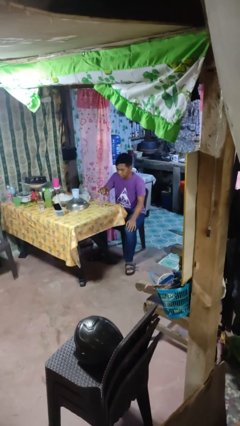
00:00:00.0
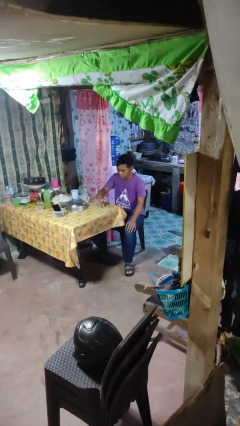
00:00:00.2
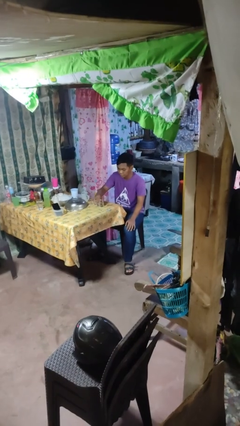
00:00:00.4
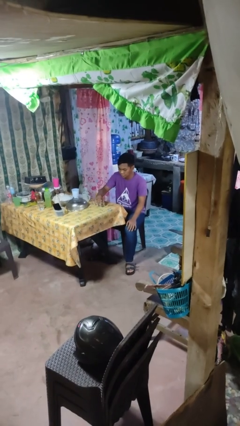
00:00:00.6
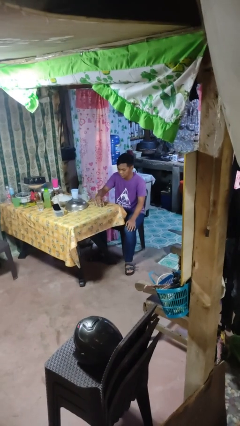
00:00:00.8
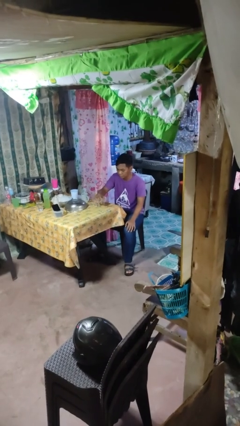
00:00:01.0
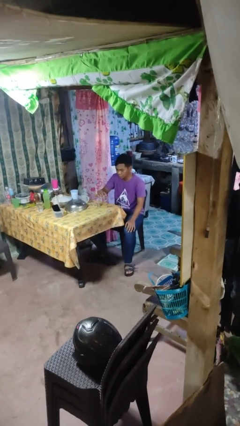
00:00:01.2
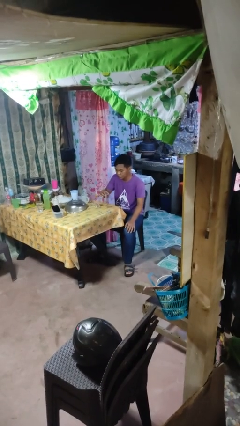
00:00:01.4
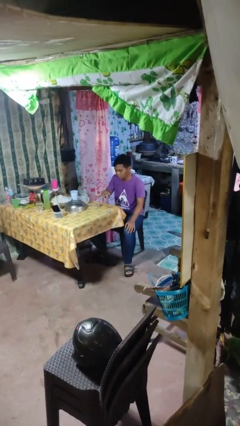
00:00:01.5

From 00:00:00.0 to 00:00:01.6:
person picks up object from table

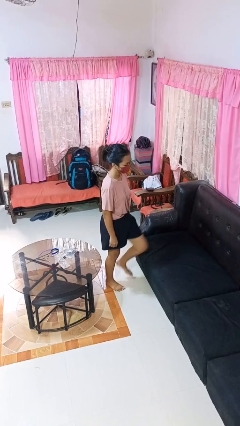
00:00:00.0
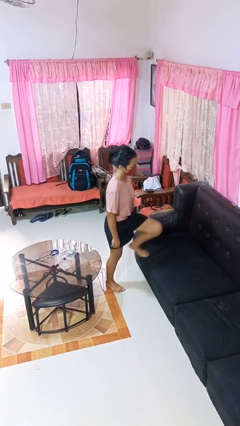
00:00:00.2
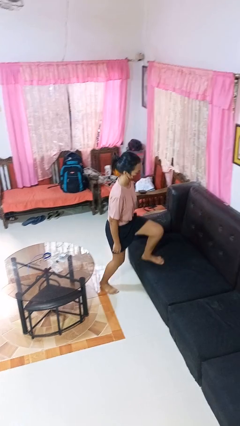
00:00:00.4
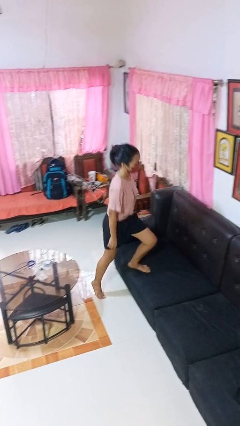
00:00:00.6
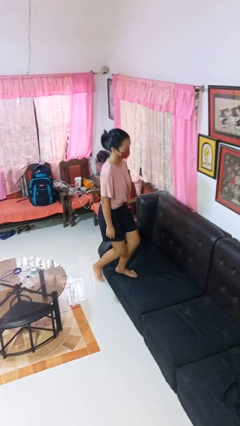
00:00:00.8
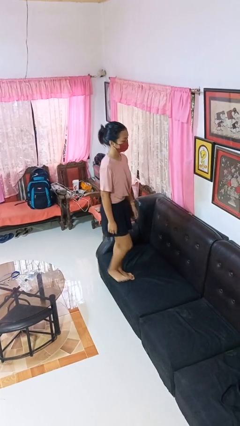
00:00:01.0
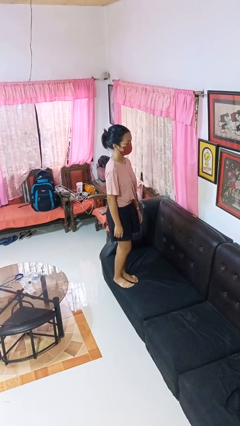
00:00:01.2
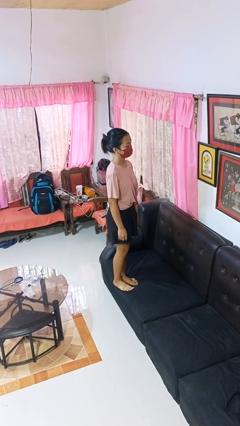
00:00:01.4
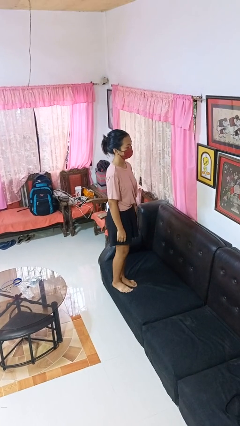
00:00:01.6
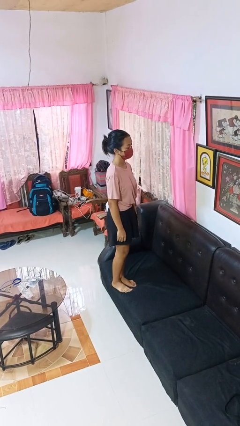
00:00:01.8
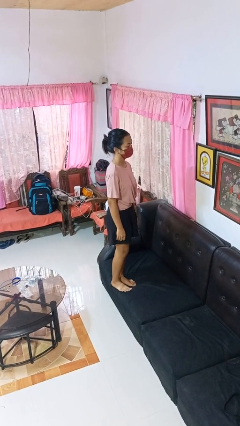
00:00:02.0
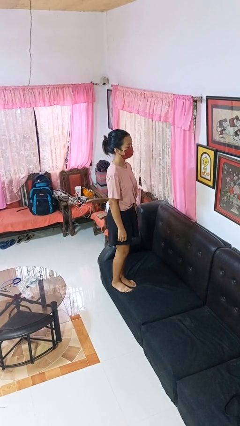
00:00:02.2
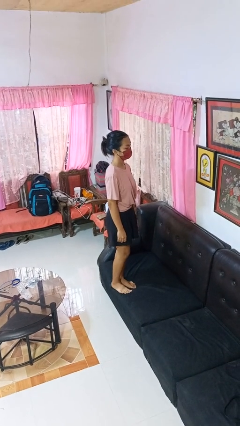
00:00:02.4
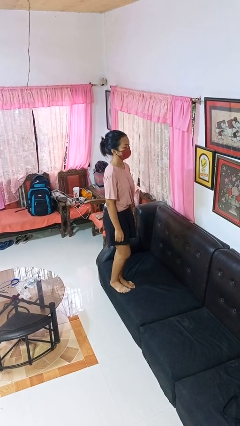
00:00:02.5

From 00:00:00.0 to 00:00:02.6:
person climbs on couch

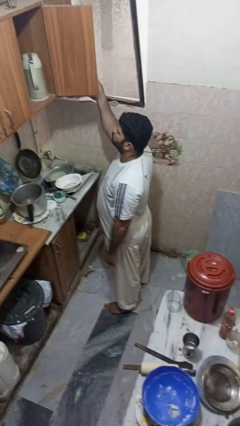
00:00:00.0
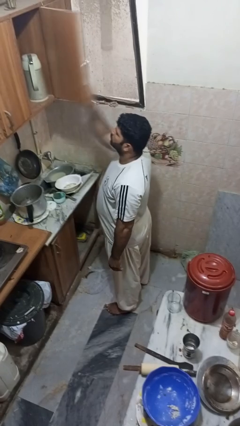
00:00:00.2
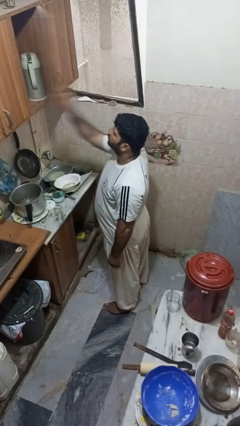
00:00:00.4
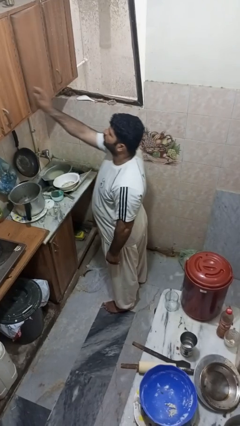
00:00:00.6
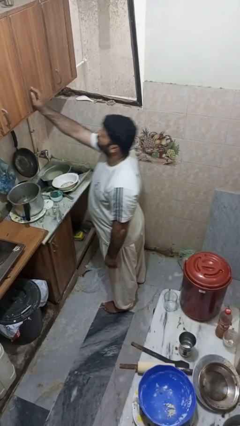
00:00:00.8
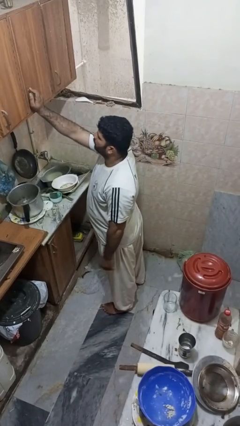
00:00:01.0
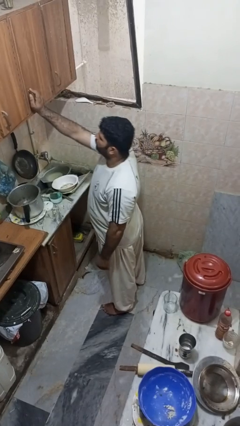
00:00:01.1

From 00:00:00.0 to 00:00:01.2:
person closes cabinet

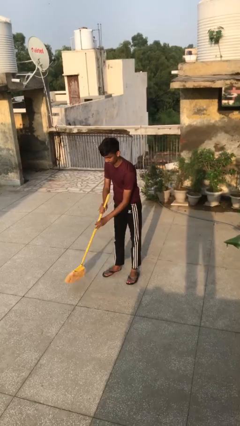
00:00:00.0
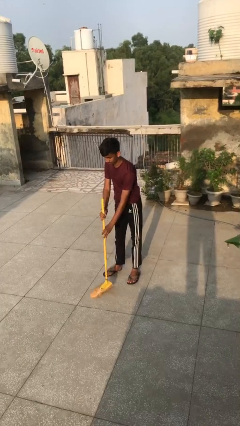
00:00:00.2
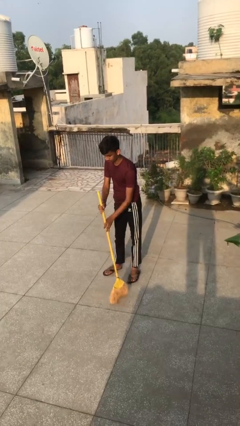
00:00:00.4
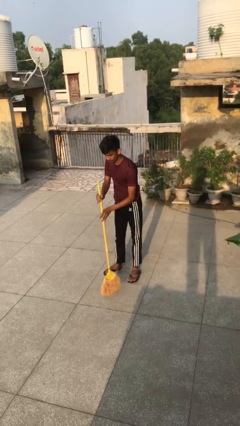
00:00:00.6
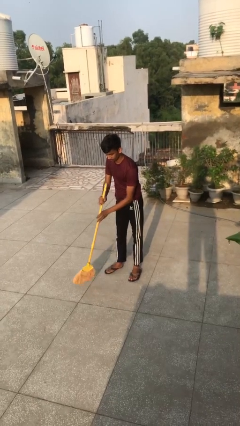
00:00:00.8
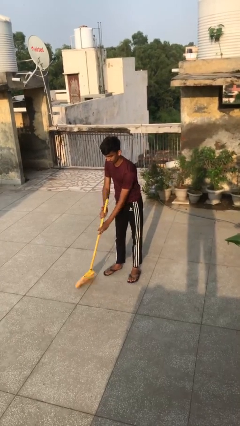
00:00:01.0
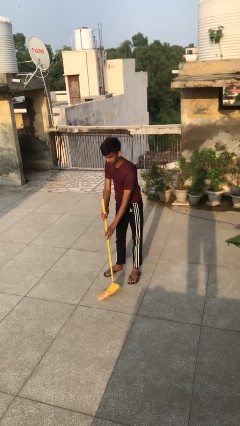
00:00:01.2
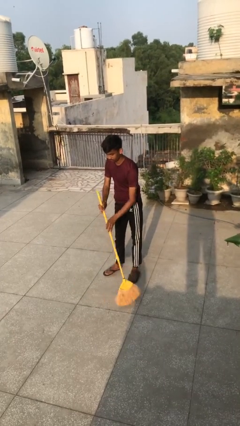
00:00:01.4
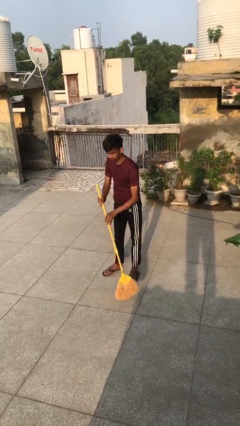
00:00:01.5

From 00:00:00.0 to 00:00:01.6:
person sweeps floor

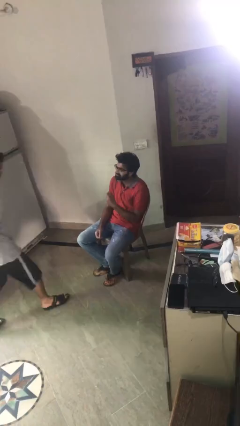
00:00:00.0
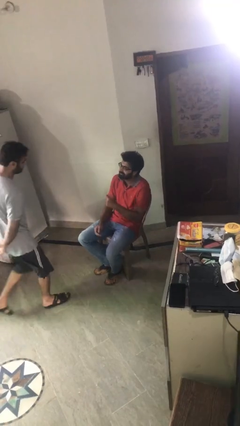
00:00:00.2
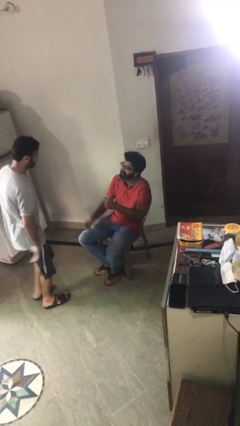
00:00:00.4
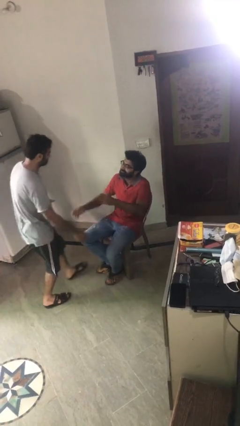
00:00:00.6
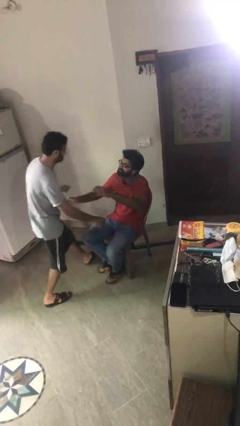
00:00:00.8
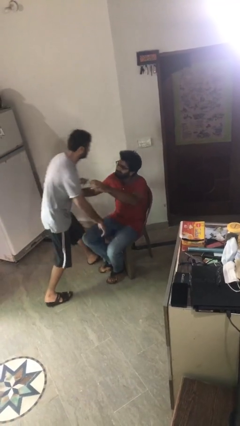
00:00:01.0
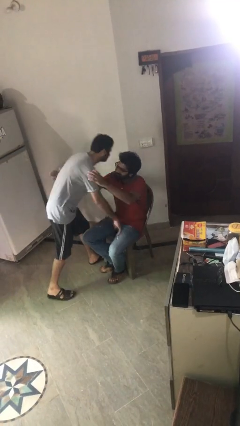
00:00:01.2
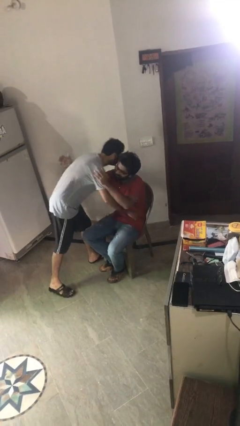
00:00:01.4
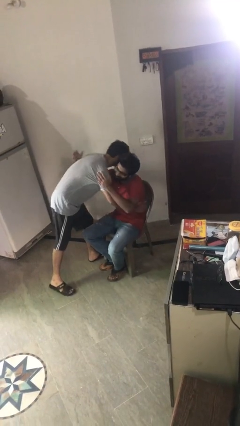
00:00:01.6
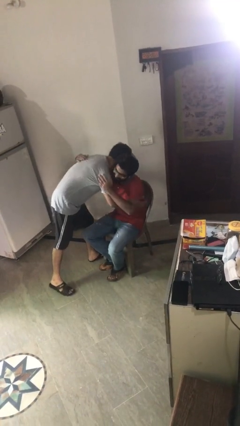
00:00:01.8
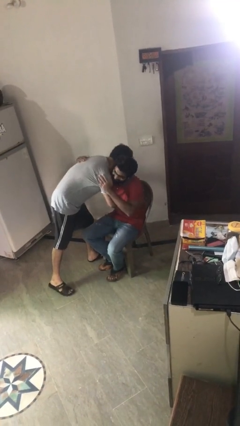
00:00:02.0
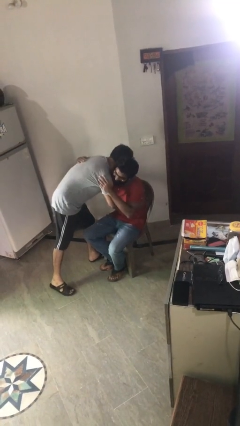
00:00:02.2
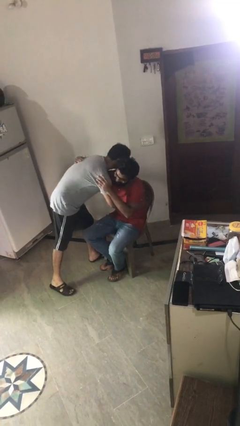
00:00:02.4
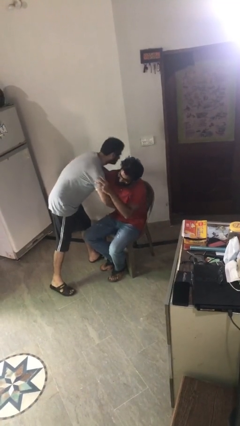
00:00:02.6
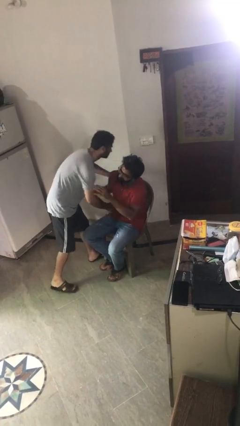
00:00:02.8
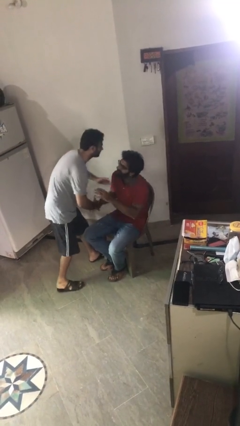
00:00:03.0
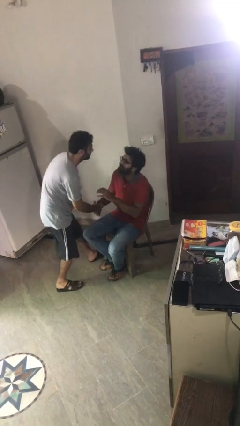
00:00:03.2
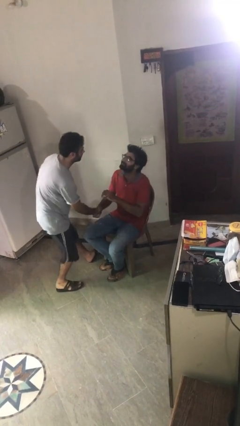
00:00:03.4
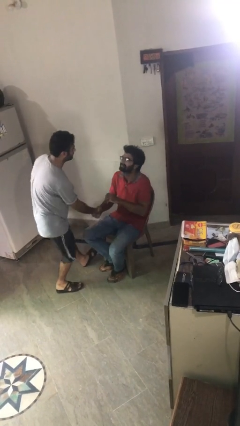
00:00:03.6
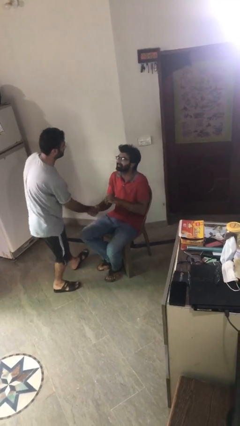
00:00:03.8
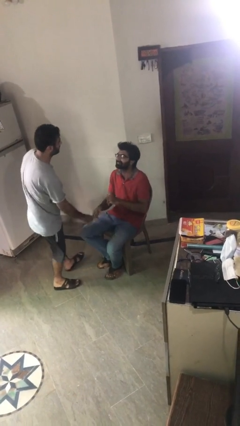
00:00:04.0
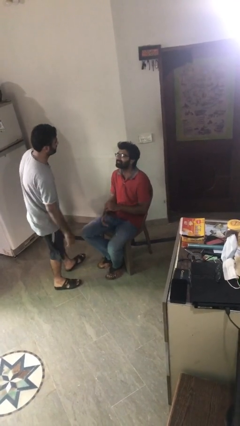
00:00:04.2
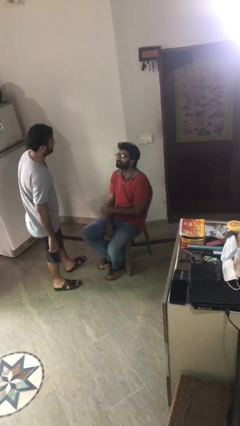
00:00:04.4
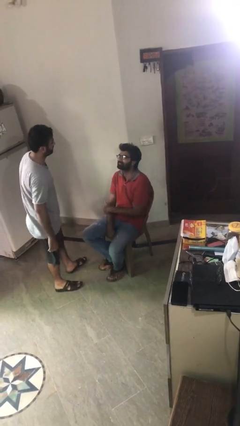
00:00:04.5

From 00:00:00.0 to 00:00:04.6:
person embraces person

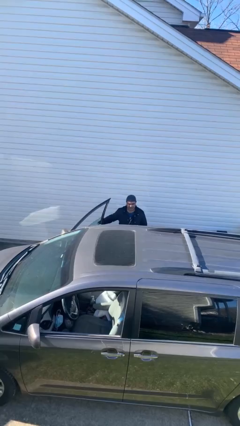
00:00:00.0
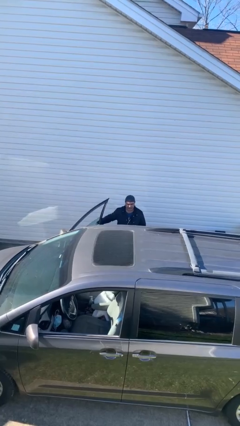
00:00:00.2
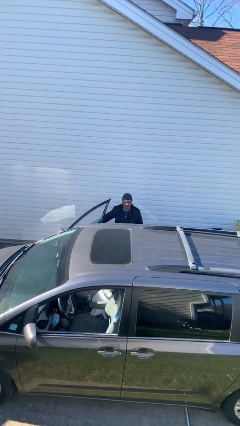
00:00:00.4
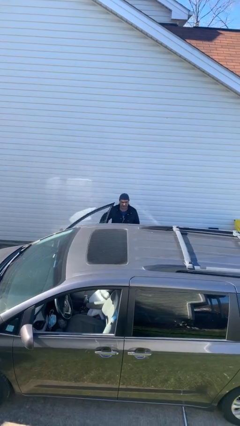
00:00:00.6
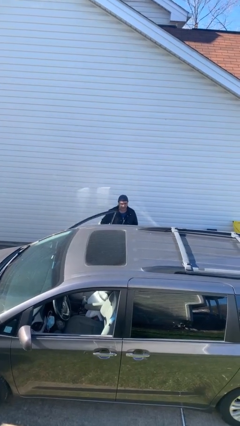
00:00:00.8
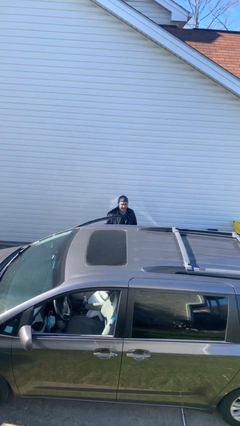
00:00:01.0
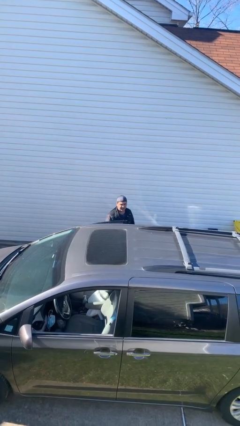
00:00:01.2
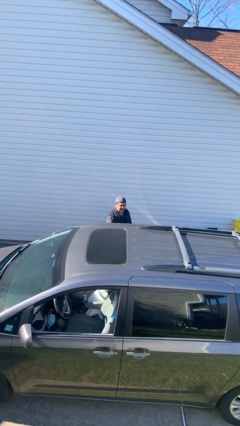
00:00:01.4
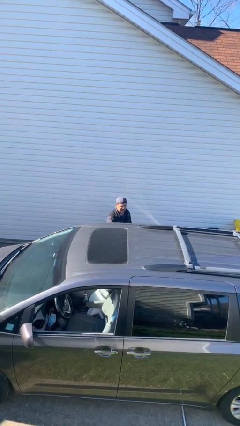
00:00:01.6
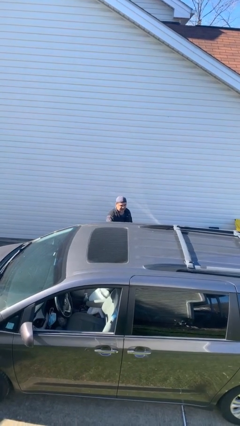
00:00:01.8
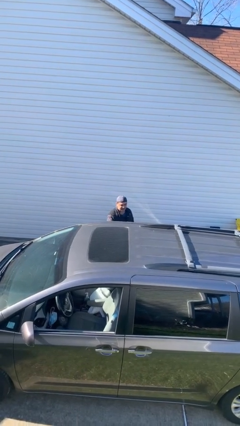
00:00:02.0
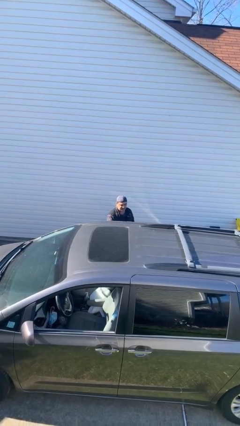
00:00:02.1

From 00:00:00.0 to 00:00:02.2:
person closes car door

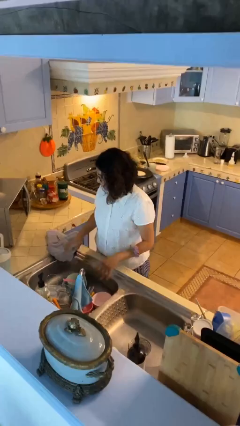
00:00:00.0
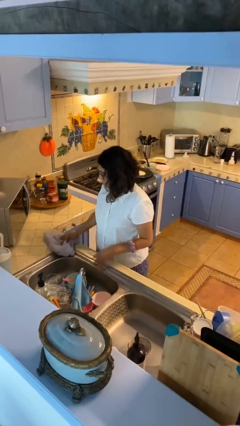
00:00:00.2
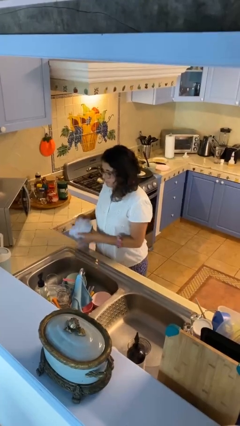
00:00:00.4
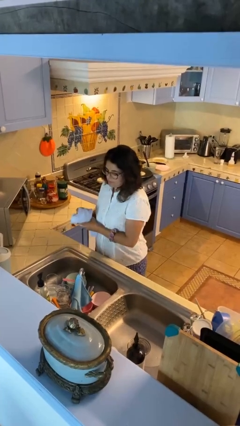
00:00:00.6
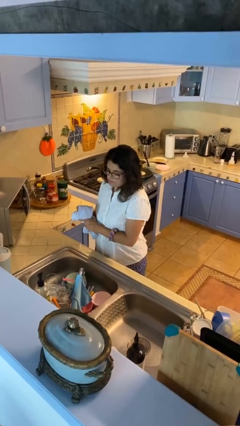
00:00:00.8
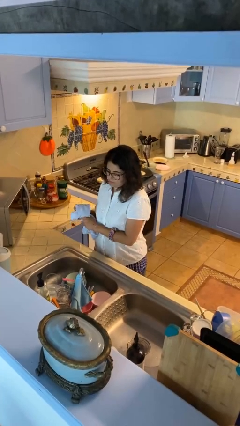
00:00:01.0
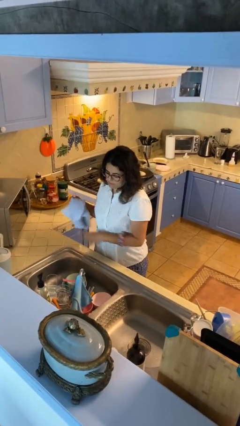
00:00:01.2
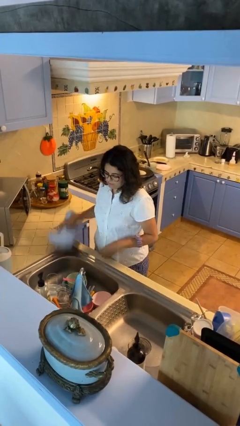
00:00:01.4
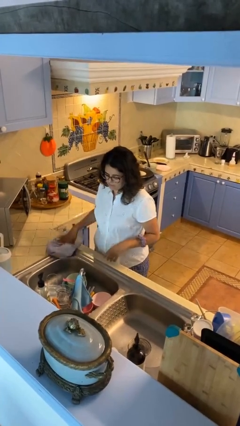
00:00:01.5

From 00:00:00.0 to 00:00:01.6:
person dries hands with towel

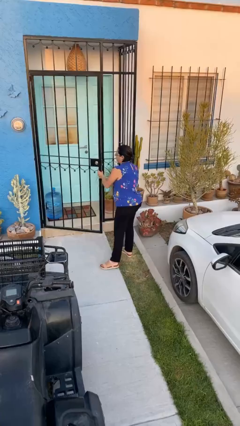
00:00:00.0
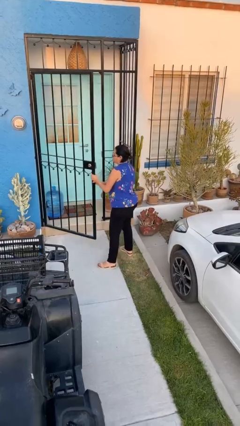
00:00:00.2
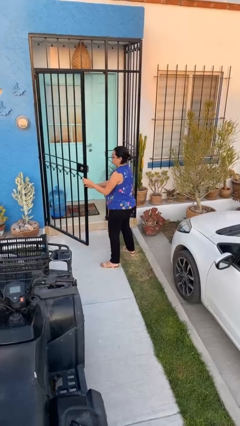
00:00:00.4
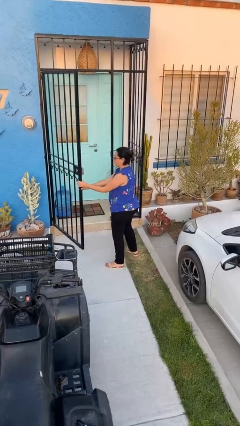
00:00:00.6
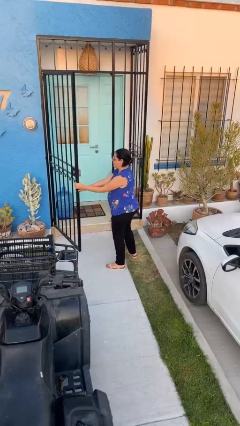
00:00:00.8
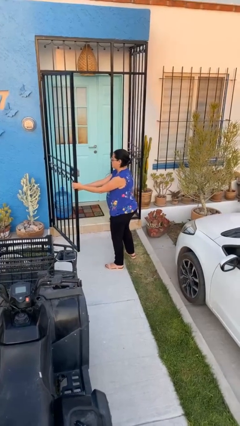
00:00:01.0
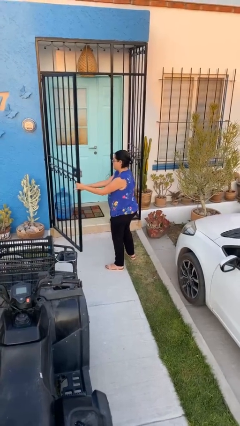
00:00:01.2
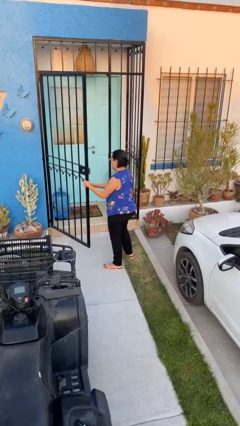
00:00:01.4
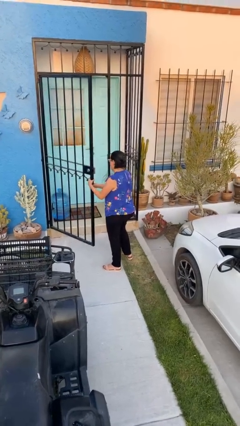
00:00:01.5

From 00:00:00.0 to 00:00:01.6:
person opens facility door
